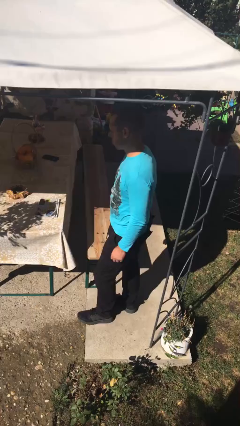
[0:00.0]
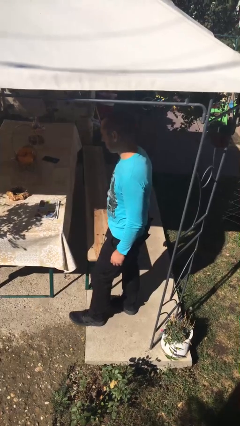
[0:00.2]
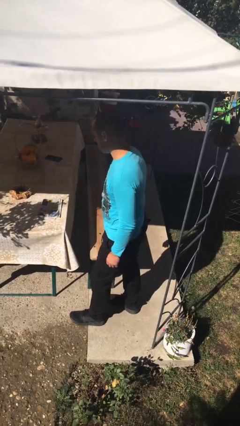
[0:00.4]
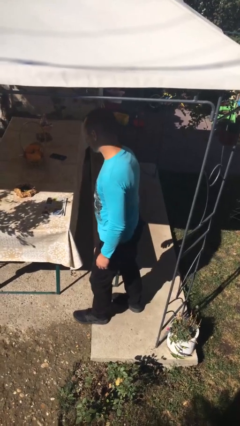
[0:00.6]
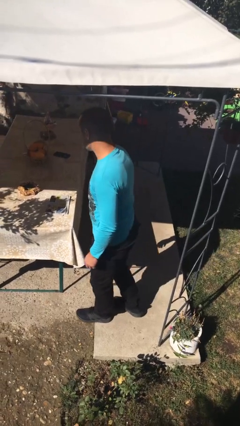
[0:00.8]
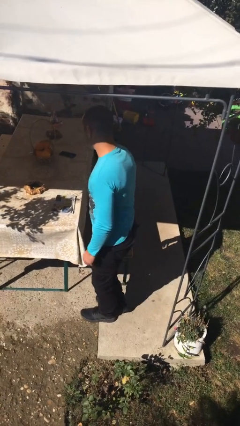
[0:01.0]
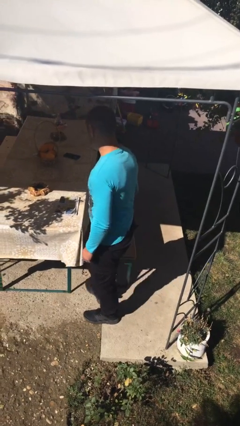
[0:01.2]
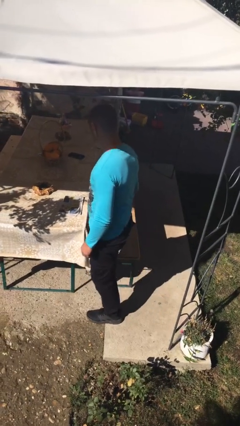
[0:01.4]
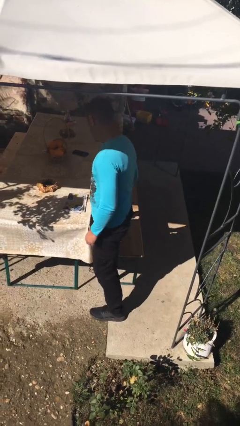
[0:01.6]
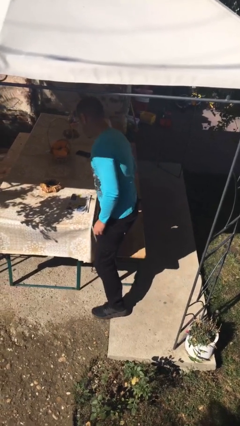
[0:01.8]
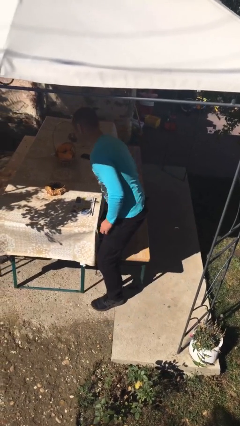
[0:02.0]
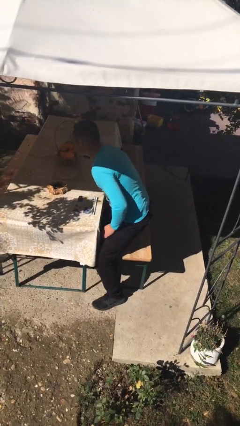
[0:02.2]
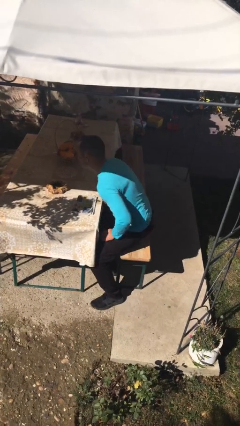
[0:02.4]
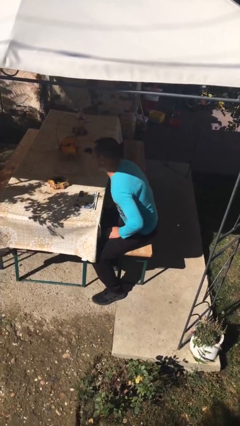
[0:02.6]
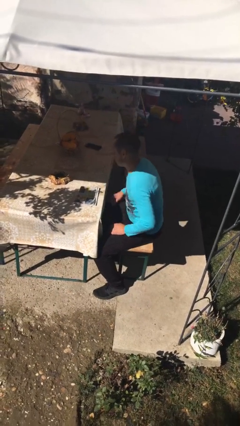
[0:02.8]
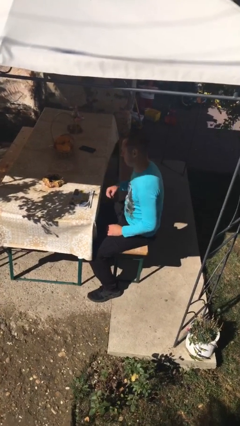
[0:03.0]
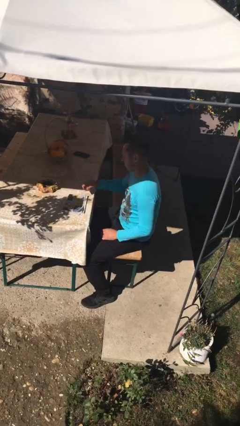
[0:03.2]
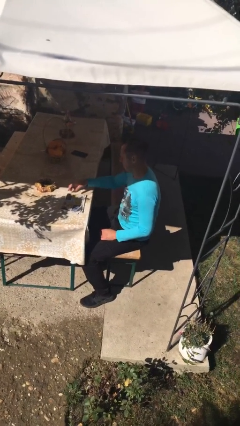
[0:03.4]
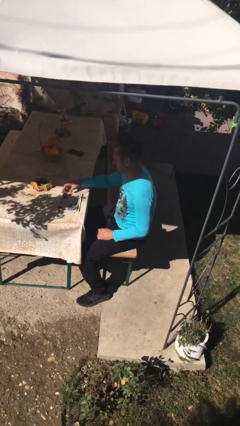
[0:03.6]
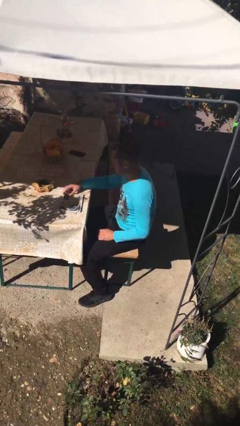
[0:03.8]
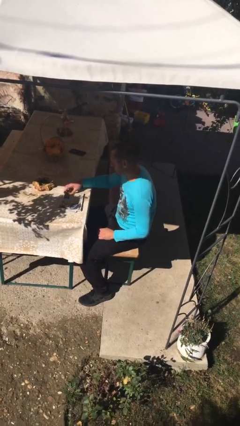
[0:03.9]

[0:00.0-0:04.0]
person sits down

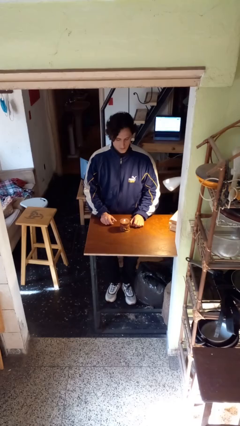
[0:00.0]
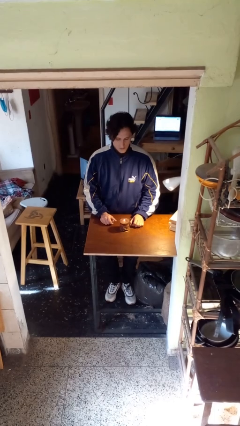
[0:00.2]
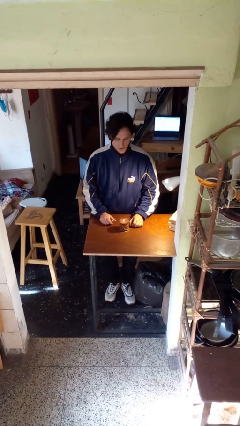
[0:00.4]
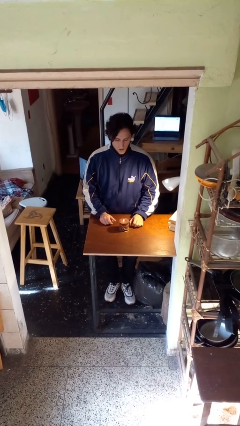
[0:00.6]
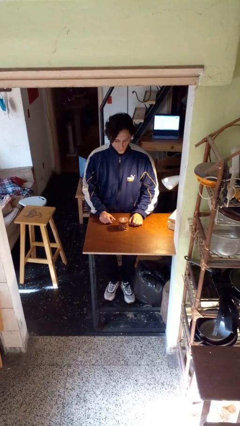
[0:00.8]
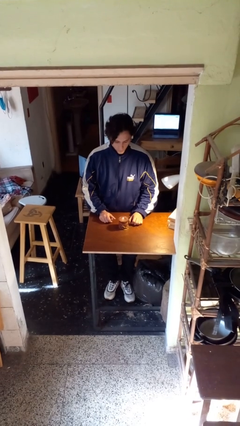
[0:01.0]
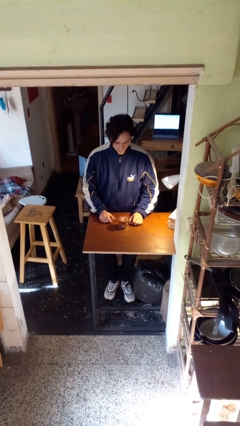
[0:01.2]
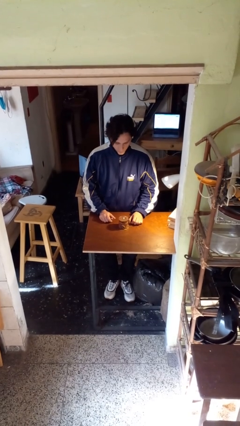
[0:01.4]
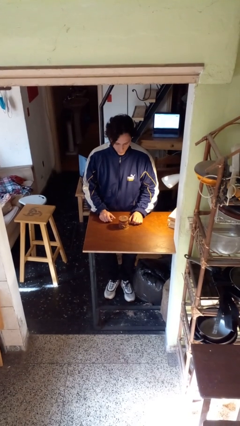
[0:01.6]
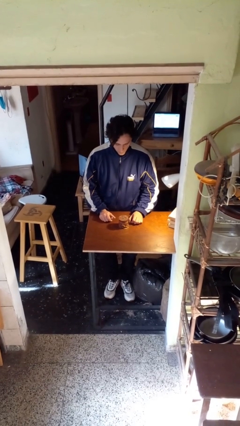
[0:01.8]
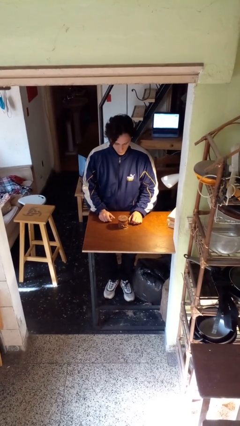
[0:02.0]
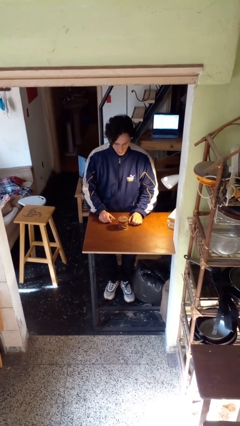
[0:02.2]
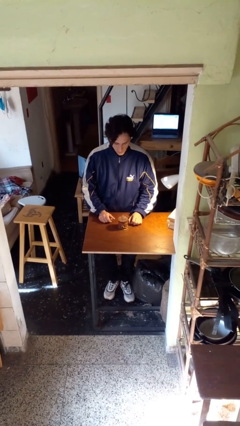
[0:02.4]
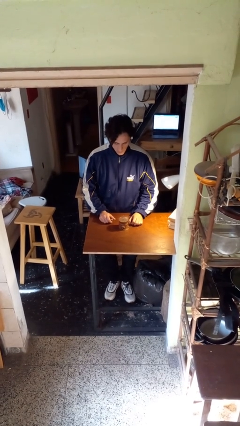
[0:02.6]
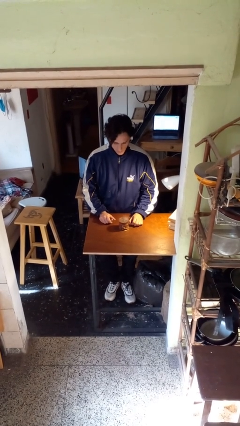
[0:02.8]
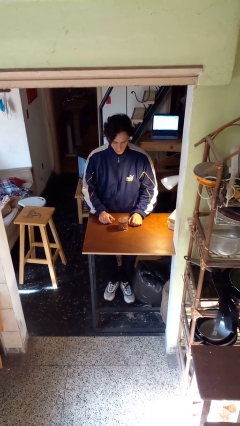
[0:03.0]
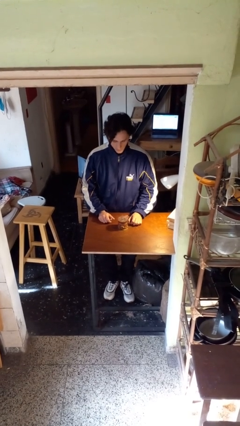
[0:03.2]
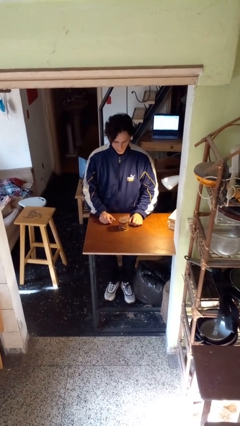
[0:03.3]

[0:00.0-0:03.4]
person extinguishes candle

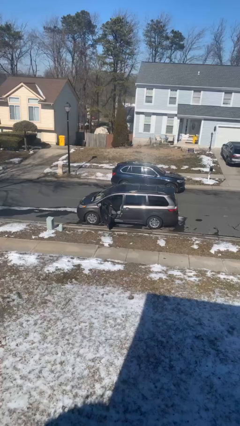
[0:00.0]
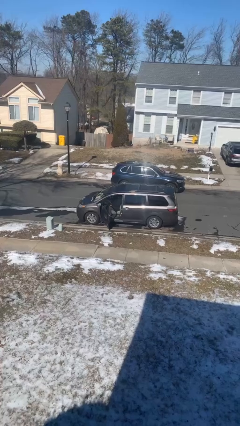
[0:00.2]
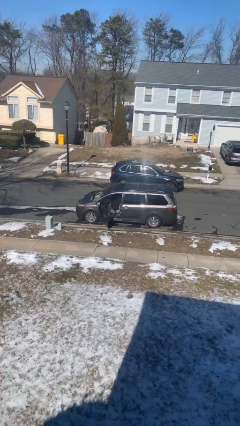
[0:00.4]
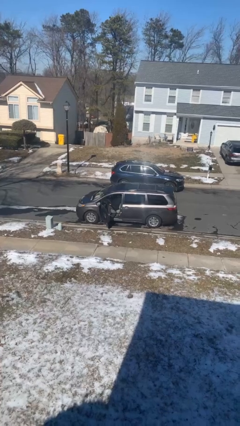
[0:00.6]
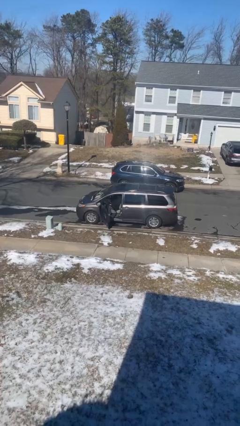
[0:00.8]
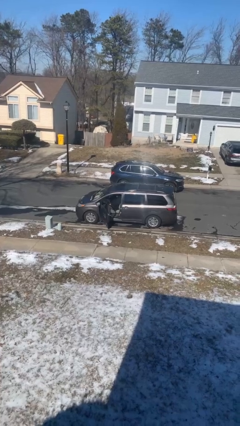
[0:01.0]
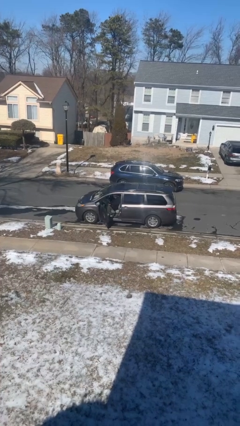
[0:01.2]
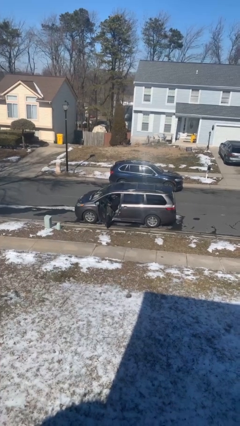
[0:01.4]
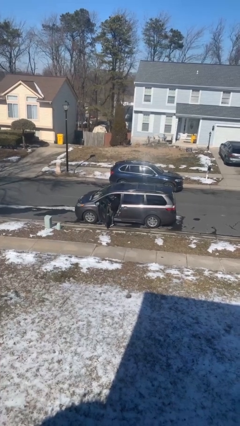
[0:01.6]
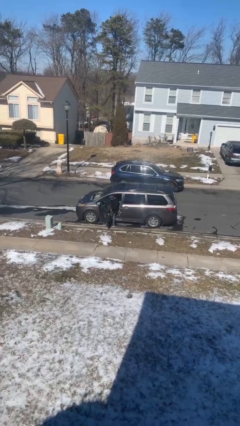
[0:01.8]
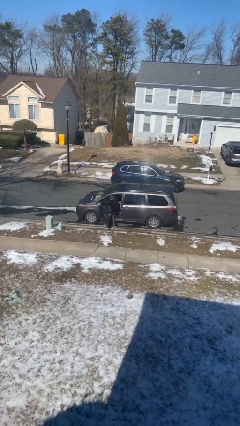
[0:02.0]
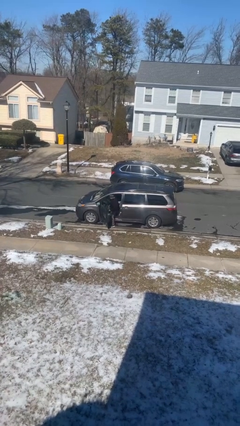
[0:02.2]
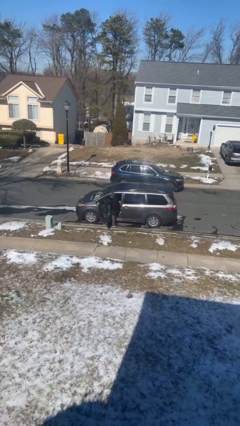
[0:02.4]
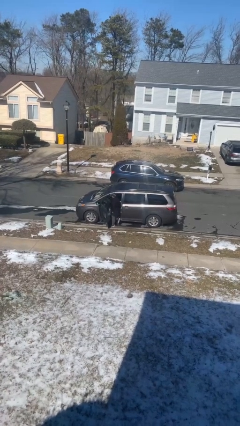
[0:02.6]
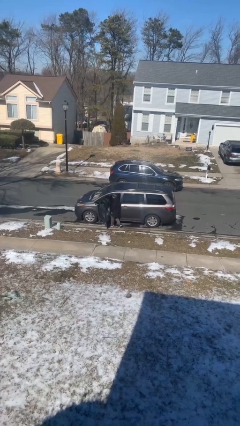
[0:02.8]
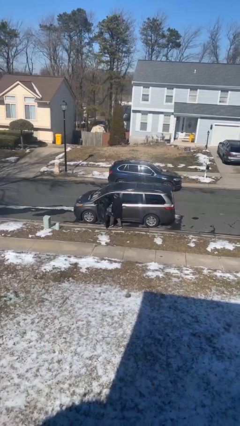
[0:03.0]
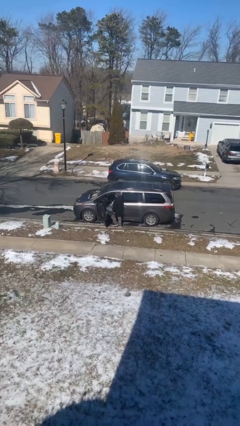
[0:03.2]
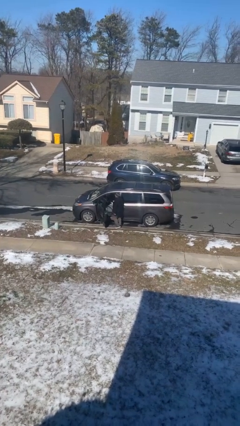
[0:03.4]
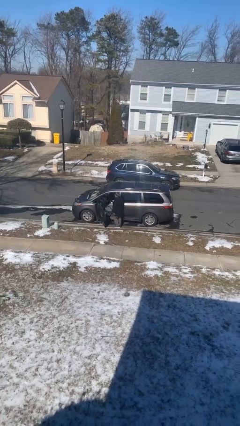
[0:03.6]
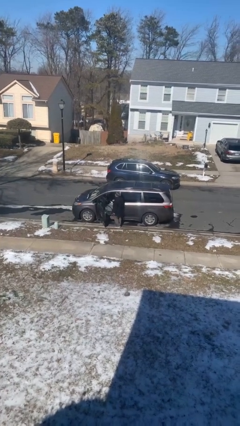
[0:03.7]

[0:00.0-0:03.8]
person exits car

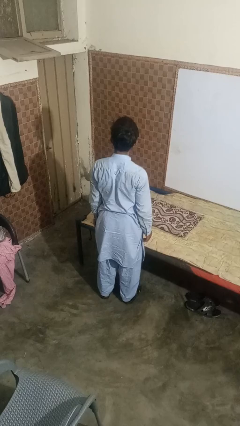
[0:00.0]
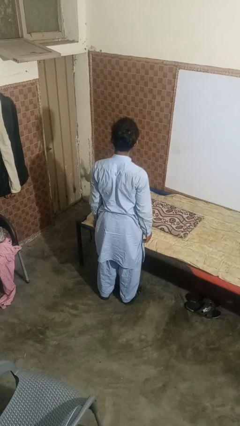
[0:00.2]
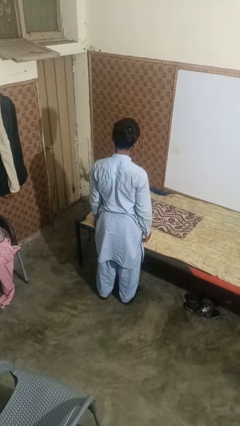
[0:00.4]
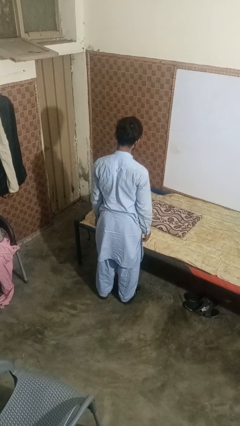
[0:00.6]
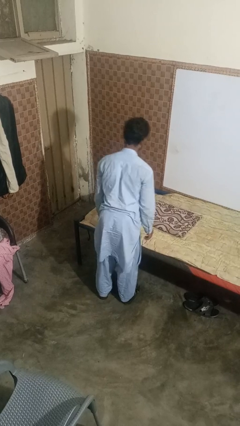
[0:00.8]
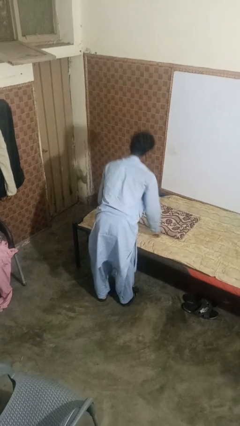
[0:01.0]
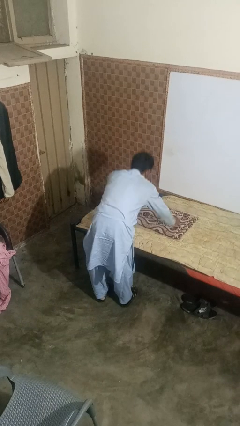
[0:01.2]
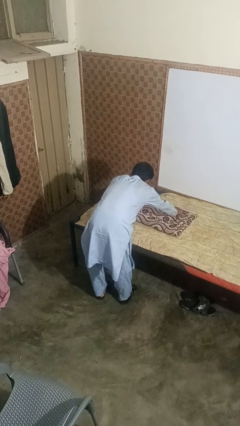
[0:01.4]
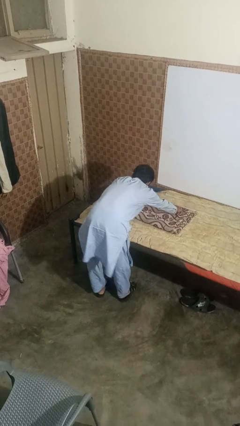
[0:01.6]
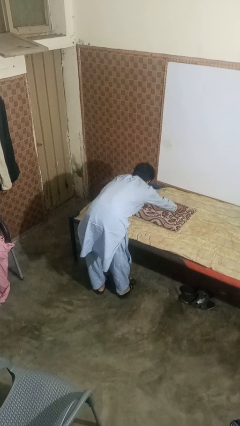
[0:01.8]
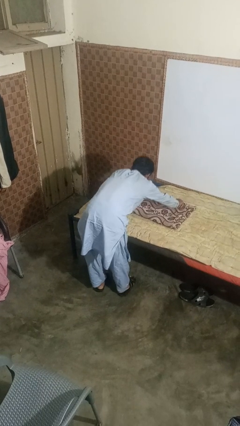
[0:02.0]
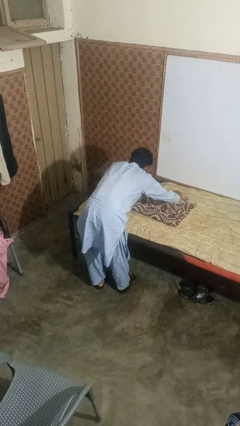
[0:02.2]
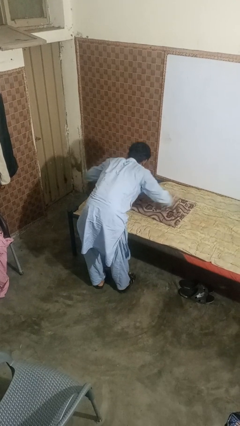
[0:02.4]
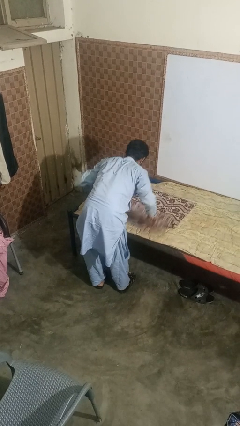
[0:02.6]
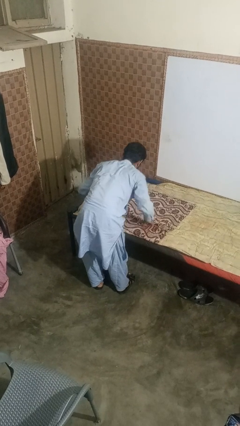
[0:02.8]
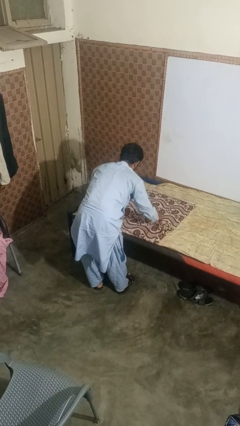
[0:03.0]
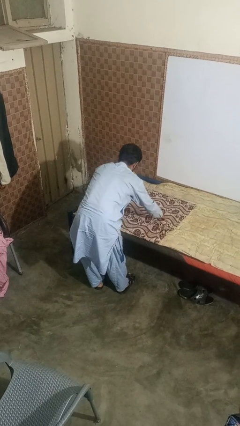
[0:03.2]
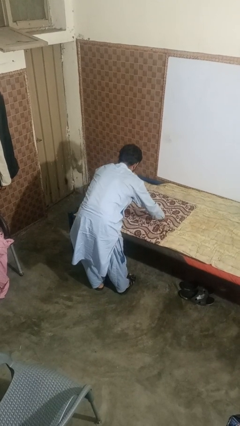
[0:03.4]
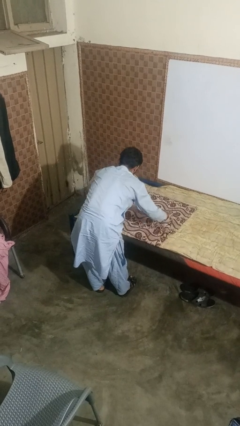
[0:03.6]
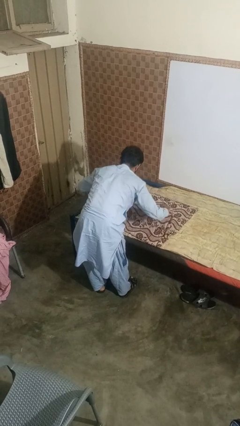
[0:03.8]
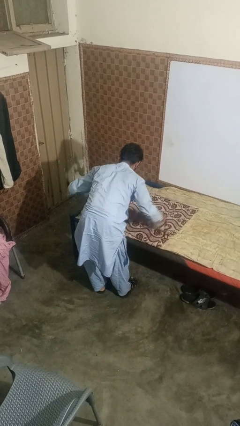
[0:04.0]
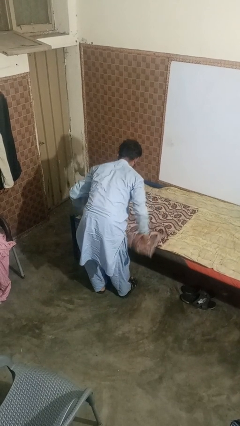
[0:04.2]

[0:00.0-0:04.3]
person unfolds blanket

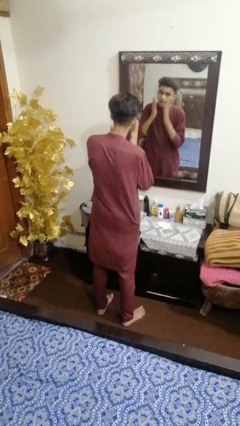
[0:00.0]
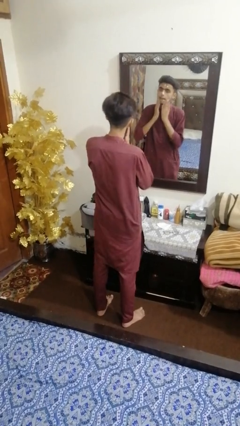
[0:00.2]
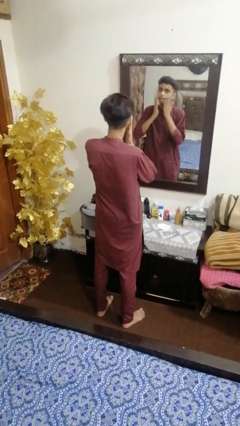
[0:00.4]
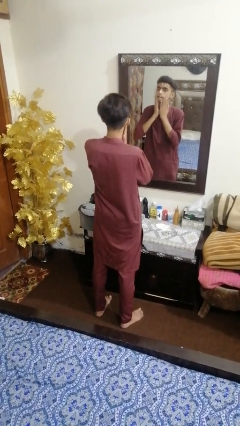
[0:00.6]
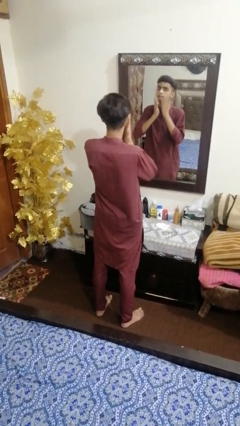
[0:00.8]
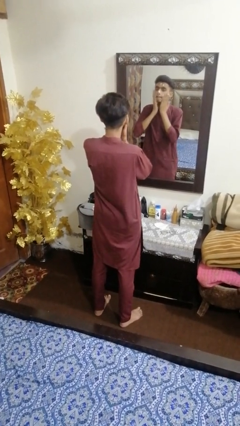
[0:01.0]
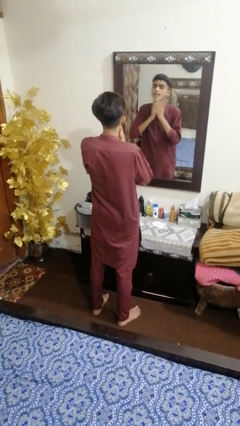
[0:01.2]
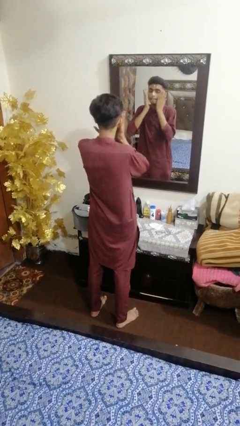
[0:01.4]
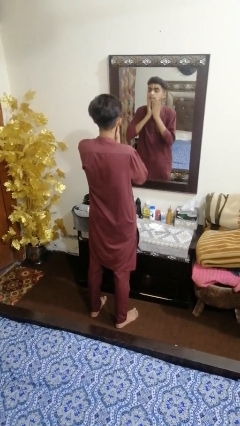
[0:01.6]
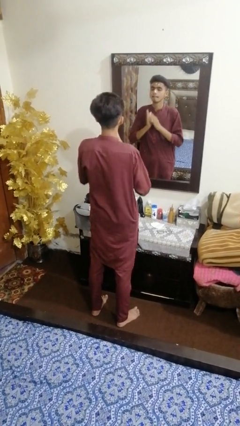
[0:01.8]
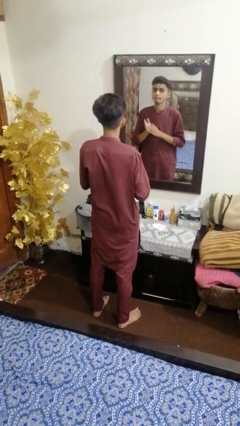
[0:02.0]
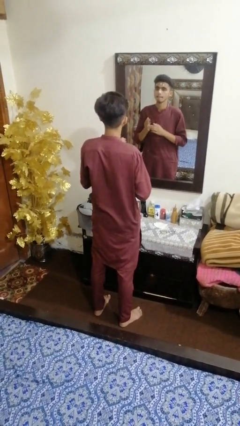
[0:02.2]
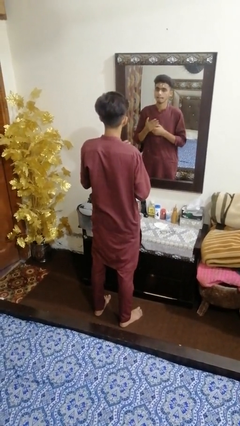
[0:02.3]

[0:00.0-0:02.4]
person applies foundation makeup

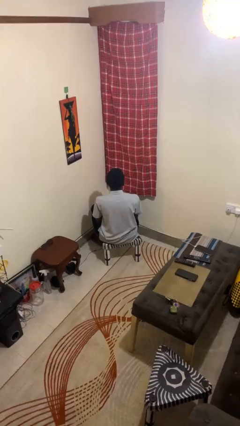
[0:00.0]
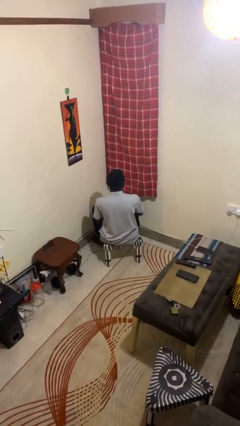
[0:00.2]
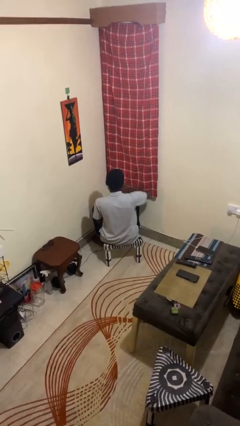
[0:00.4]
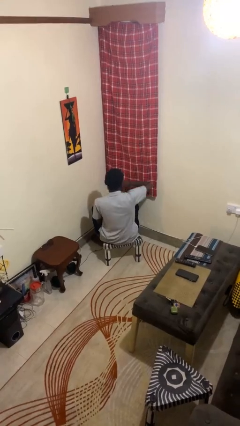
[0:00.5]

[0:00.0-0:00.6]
person gestures swipe up
